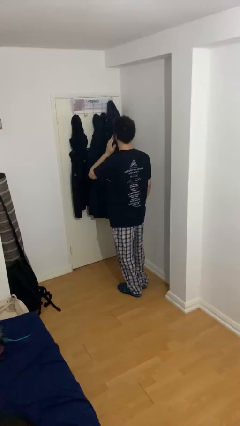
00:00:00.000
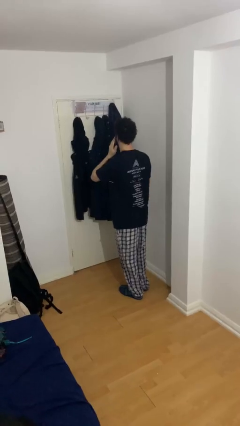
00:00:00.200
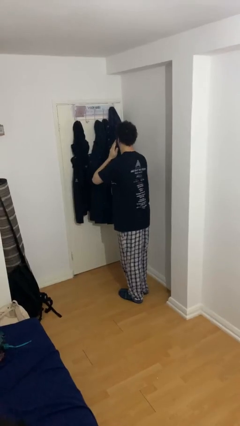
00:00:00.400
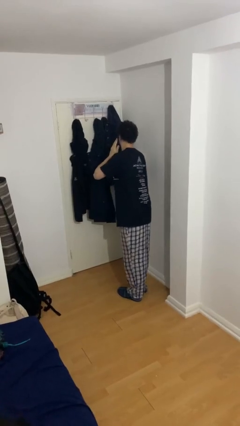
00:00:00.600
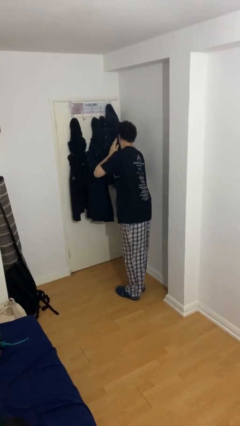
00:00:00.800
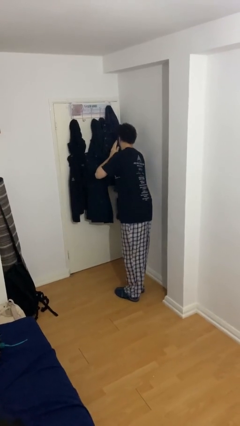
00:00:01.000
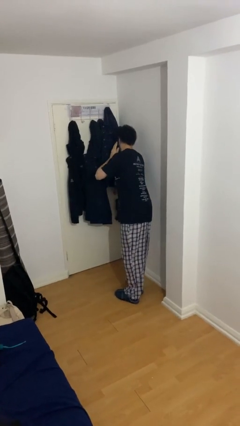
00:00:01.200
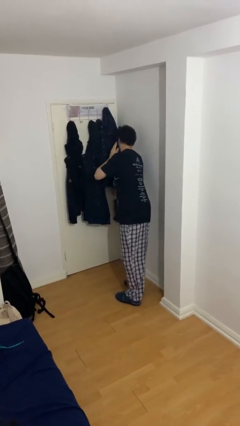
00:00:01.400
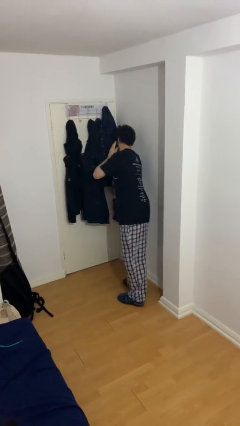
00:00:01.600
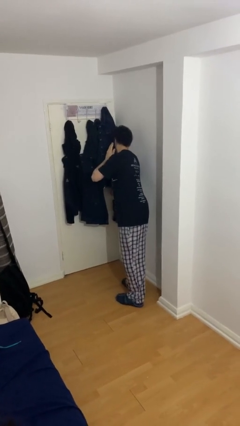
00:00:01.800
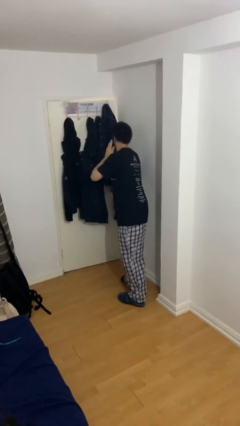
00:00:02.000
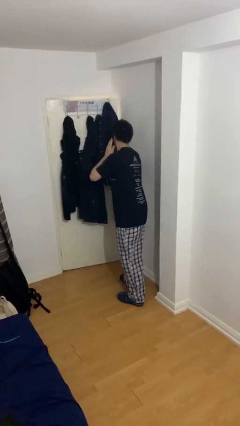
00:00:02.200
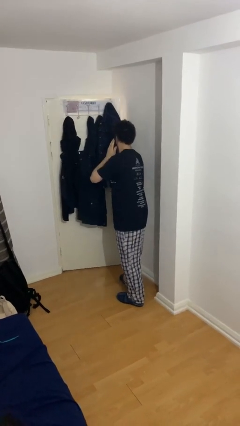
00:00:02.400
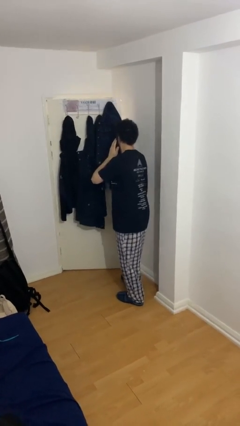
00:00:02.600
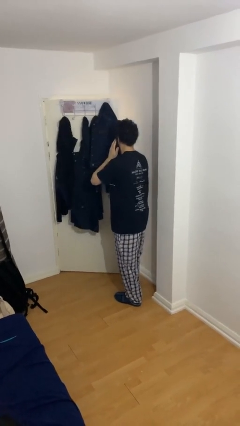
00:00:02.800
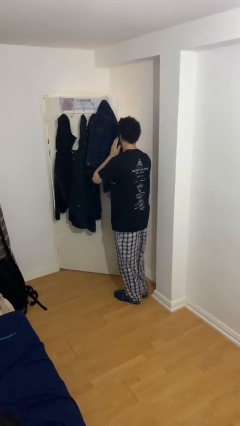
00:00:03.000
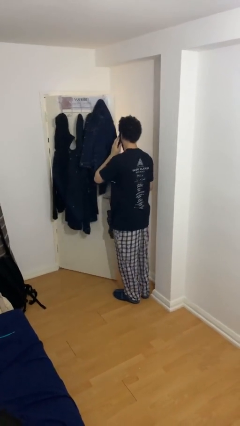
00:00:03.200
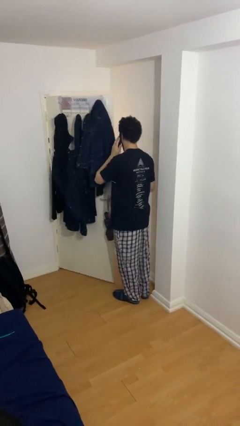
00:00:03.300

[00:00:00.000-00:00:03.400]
person opens facility door

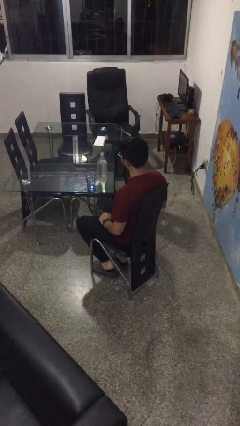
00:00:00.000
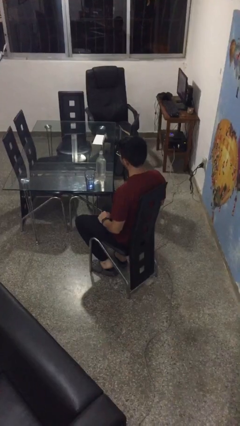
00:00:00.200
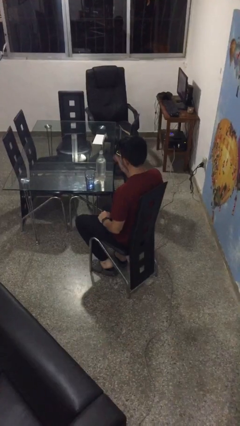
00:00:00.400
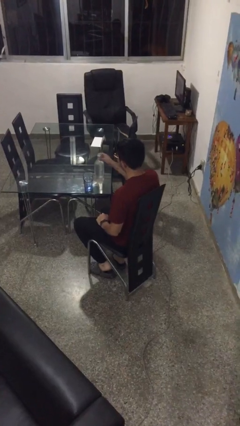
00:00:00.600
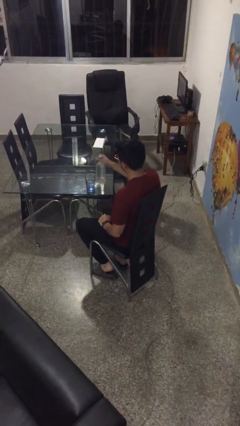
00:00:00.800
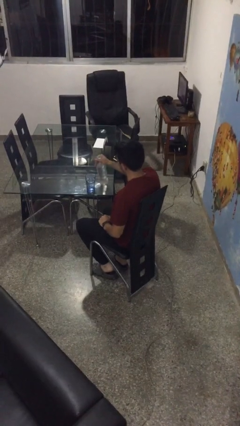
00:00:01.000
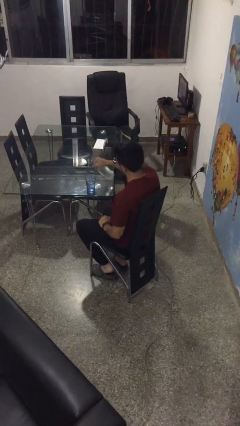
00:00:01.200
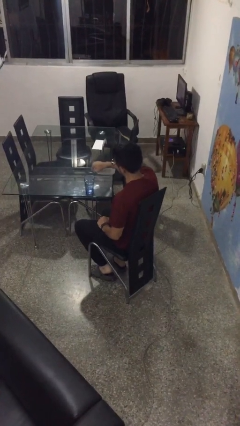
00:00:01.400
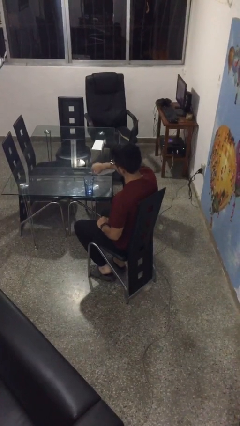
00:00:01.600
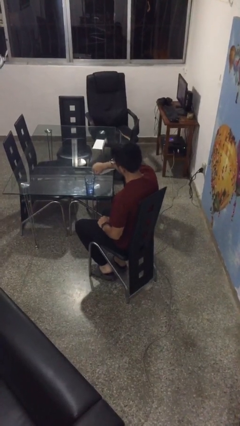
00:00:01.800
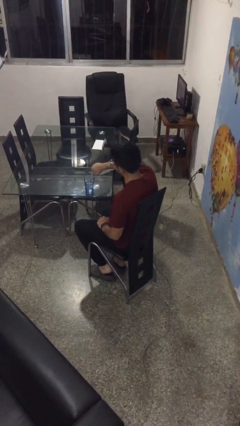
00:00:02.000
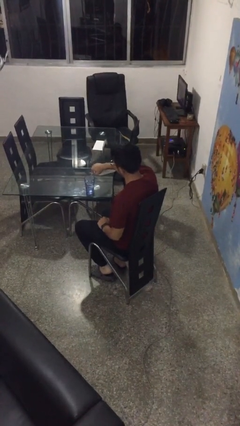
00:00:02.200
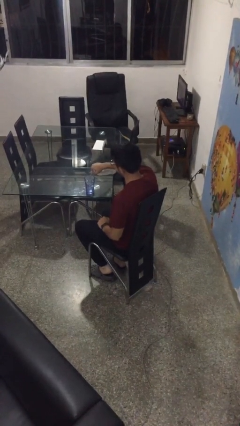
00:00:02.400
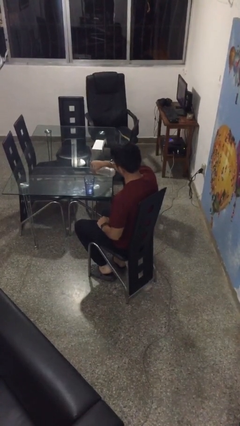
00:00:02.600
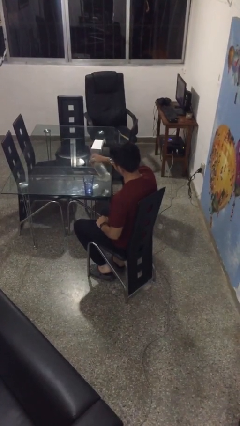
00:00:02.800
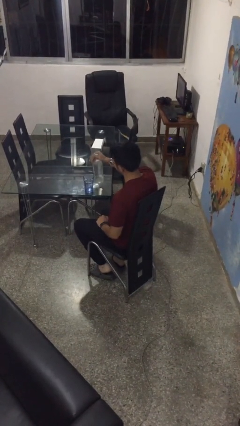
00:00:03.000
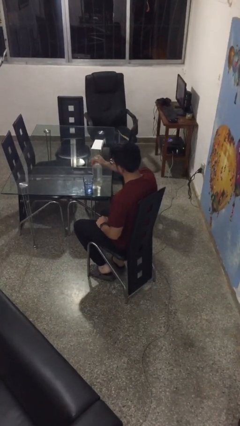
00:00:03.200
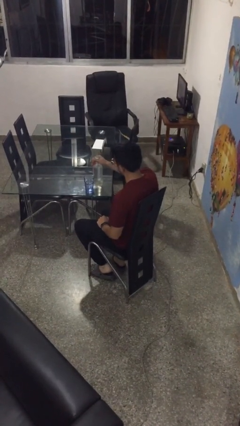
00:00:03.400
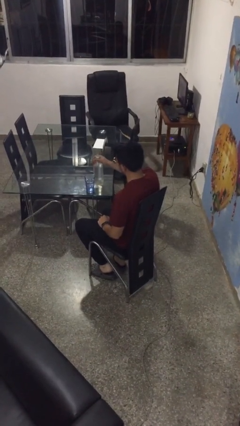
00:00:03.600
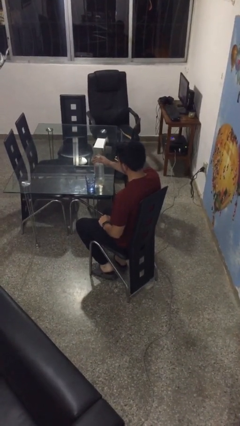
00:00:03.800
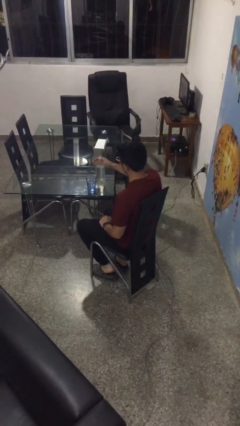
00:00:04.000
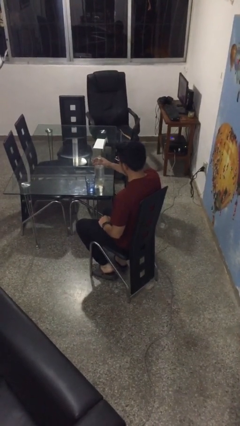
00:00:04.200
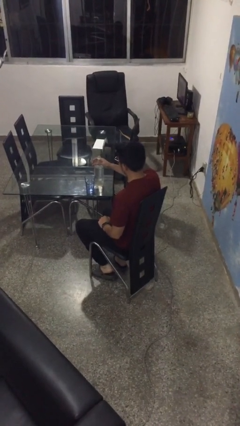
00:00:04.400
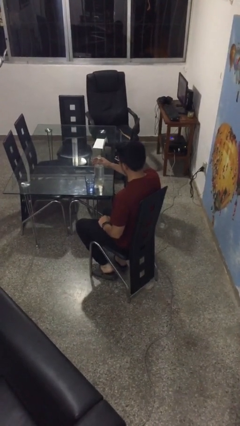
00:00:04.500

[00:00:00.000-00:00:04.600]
person pours liquid into cup

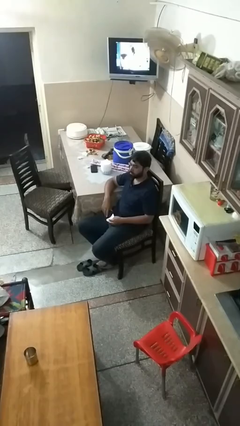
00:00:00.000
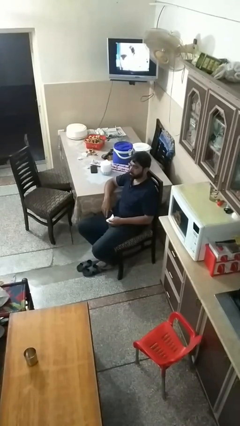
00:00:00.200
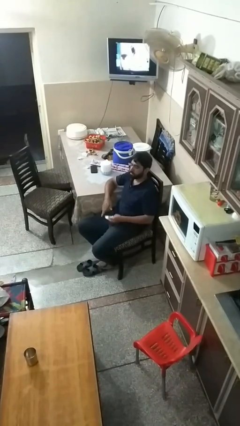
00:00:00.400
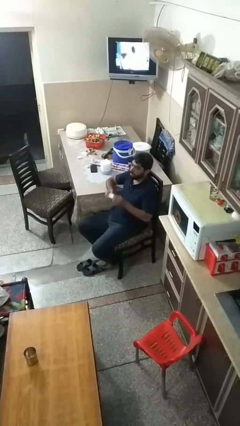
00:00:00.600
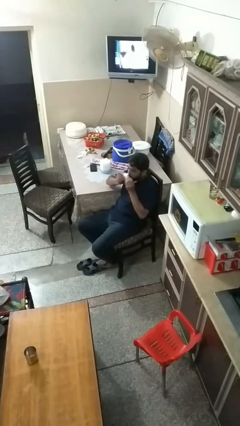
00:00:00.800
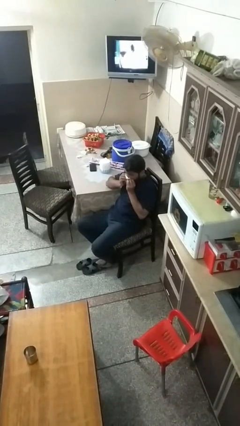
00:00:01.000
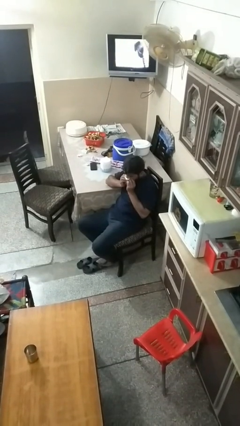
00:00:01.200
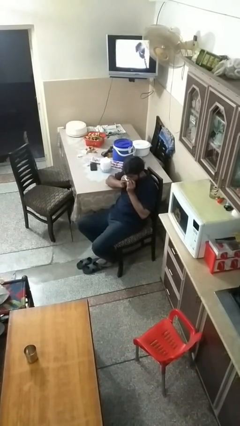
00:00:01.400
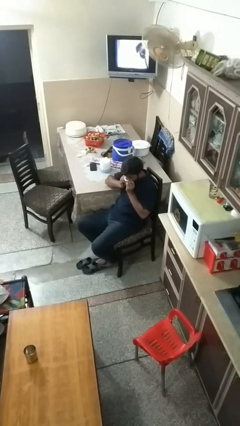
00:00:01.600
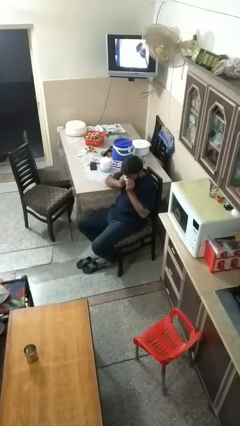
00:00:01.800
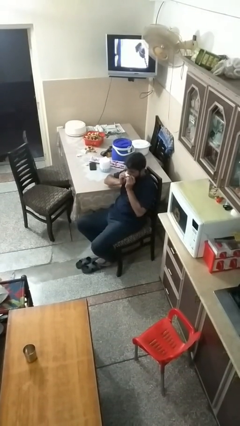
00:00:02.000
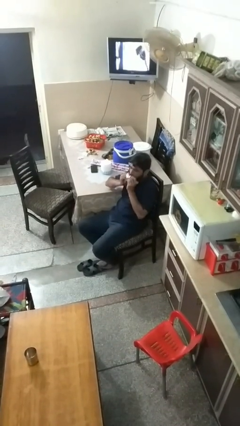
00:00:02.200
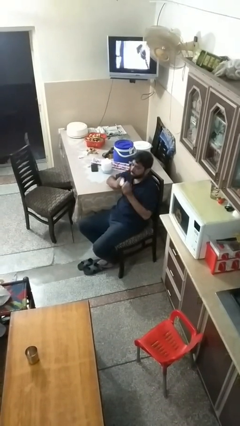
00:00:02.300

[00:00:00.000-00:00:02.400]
person blows nose

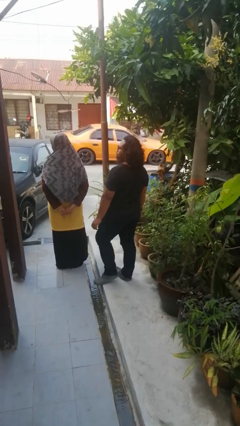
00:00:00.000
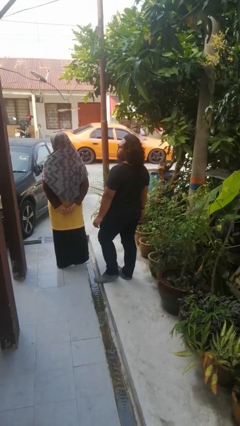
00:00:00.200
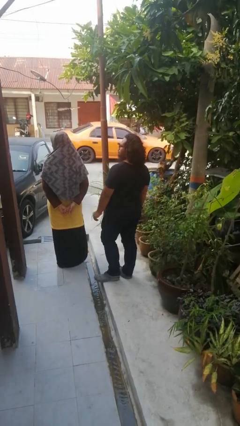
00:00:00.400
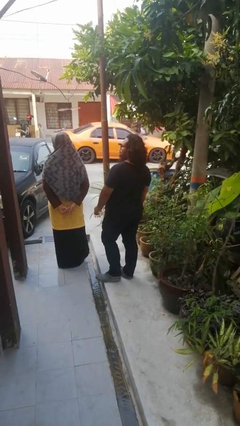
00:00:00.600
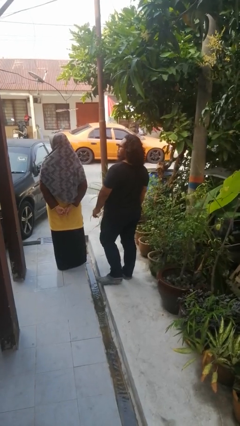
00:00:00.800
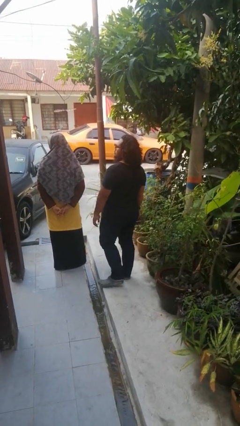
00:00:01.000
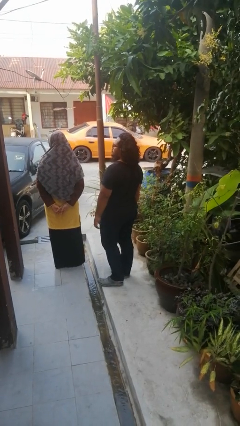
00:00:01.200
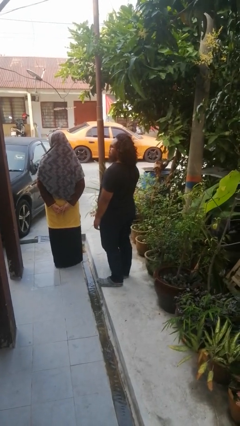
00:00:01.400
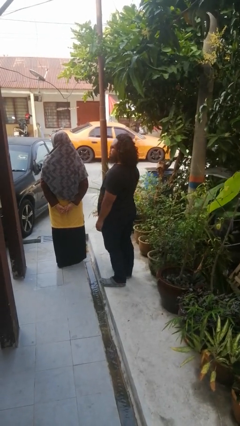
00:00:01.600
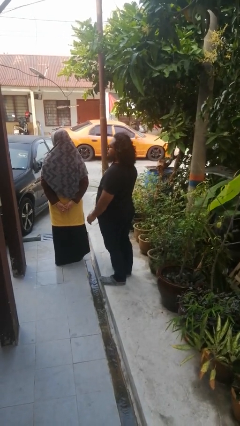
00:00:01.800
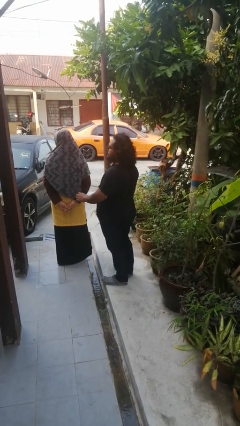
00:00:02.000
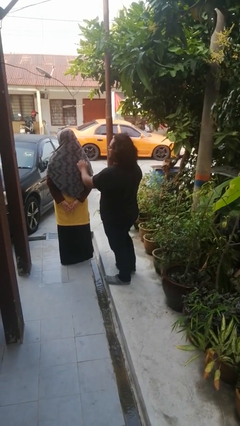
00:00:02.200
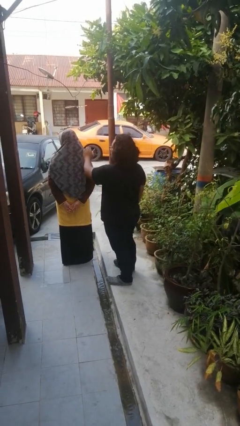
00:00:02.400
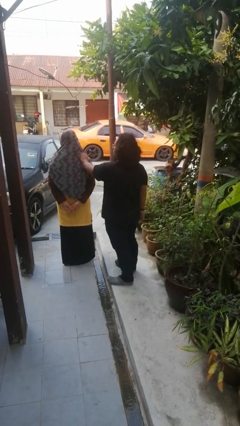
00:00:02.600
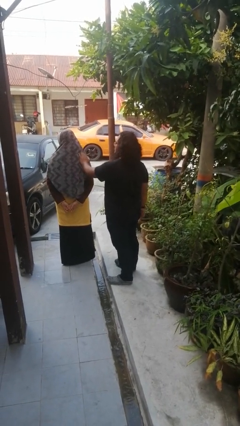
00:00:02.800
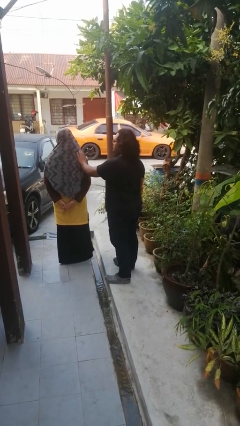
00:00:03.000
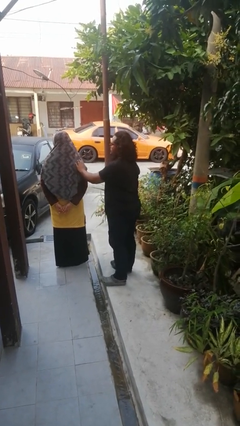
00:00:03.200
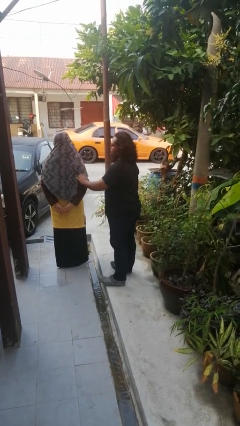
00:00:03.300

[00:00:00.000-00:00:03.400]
person touches back of person

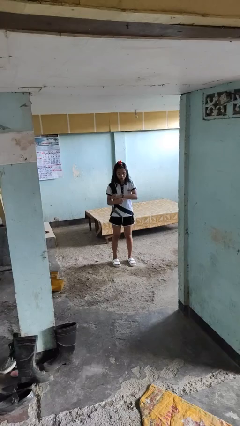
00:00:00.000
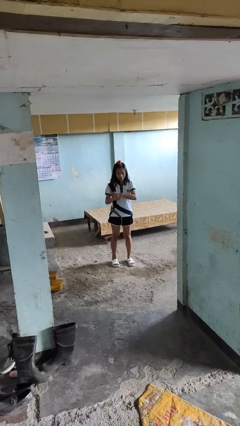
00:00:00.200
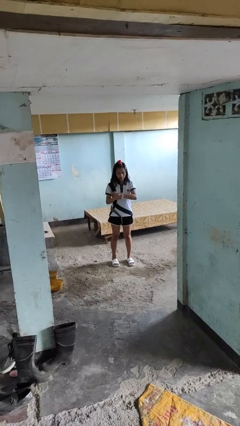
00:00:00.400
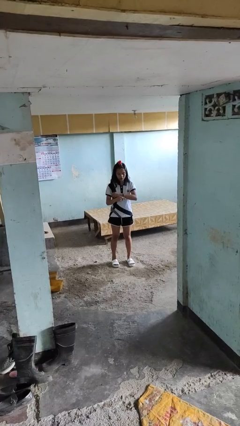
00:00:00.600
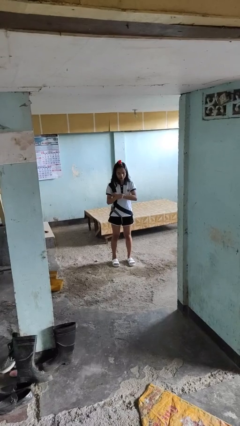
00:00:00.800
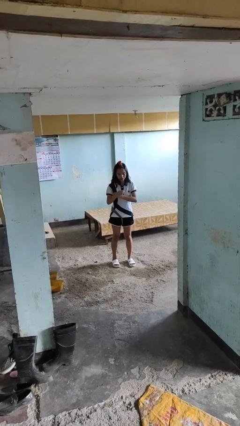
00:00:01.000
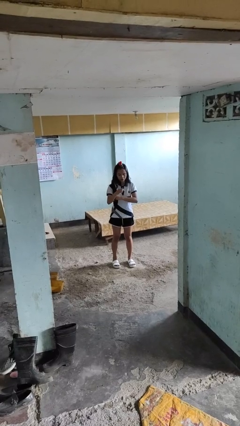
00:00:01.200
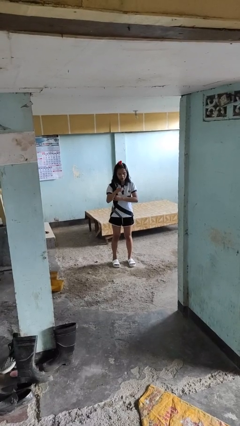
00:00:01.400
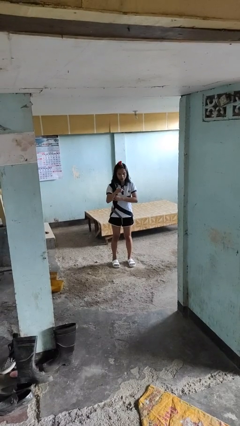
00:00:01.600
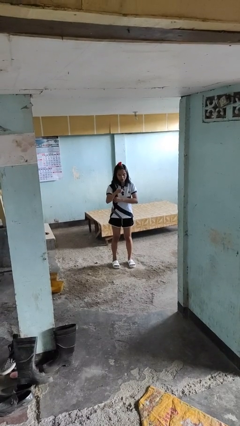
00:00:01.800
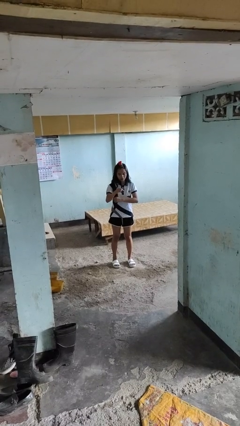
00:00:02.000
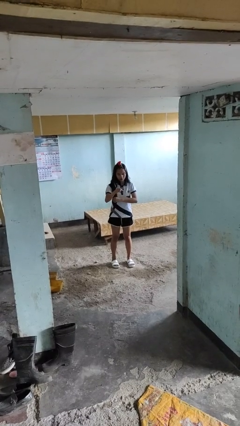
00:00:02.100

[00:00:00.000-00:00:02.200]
person takes off wristwatch

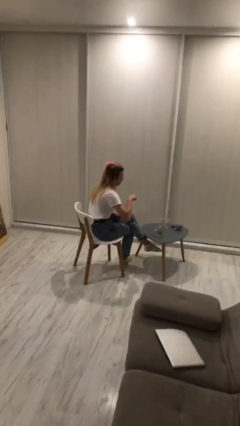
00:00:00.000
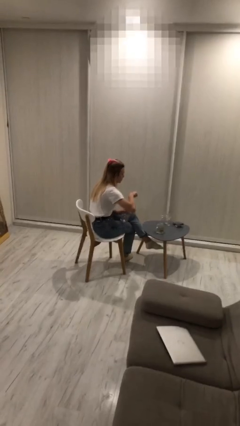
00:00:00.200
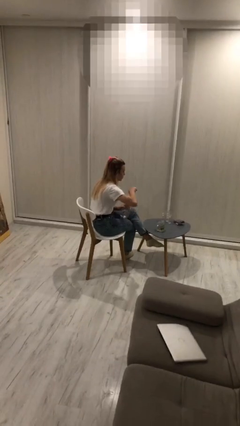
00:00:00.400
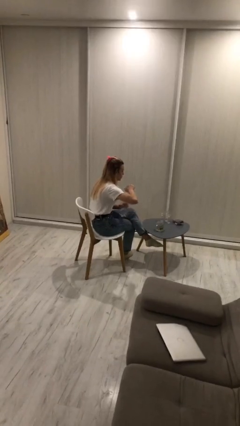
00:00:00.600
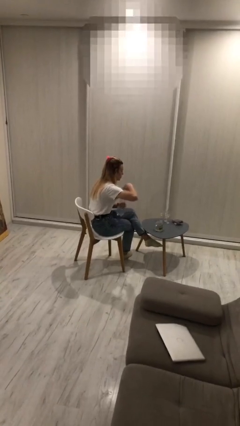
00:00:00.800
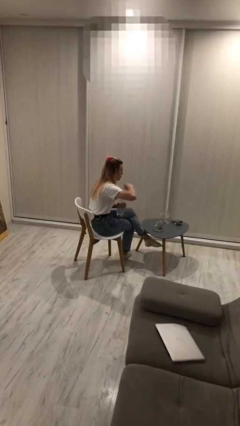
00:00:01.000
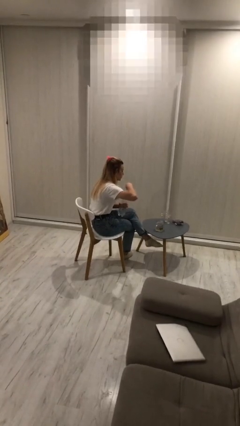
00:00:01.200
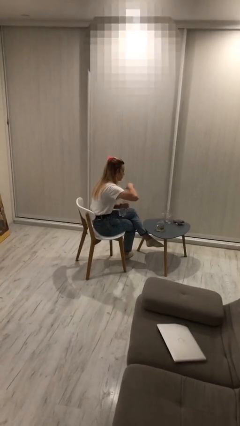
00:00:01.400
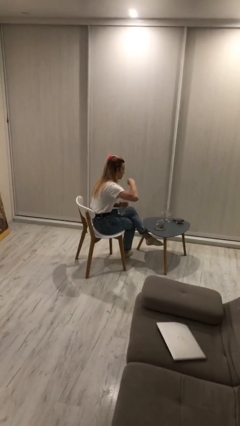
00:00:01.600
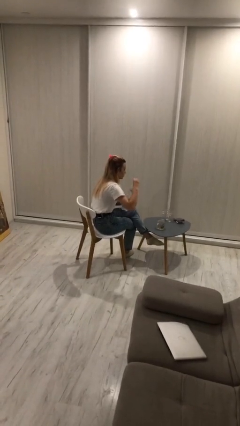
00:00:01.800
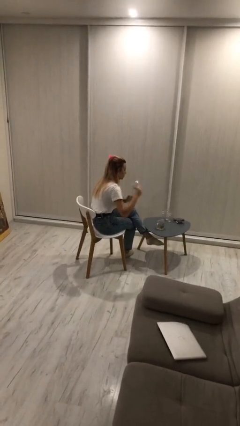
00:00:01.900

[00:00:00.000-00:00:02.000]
person unscrews lid from bottle
